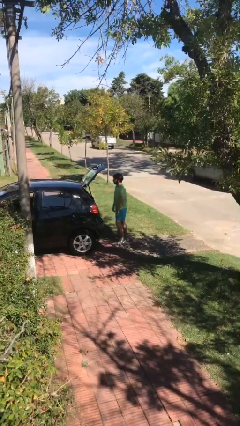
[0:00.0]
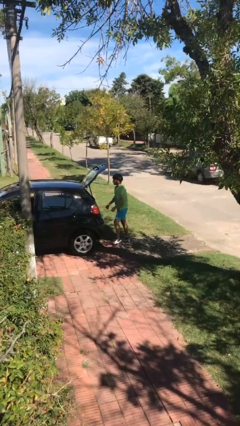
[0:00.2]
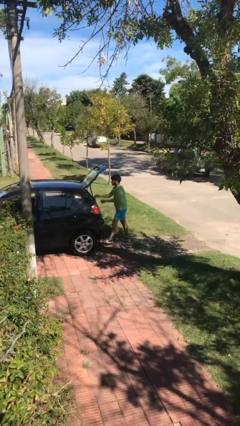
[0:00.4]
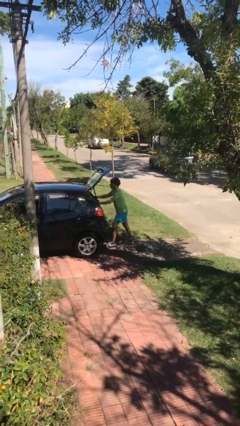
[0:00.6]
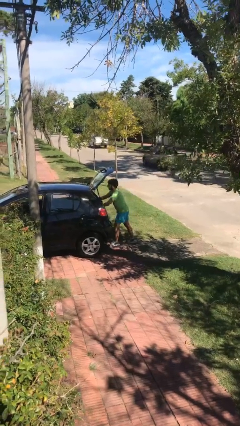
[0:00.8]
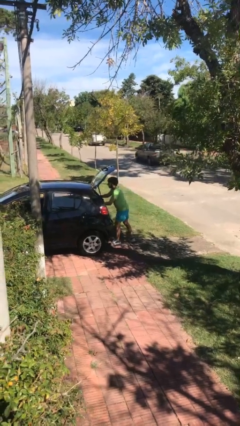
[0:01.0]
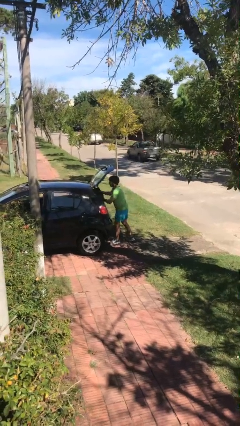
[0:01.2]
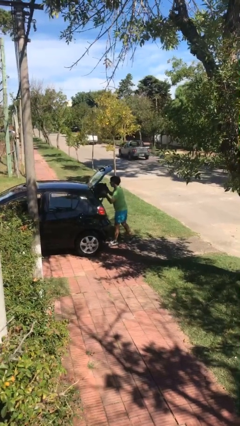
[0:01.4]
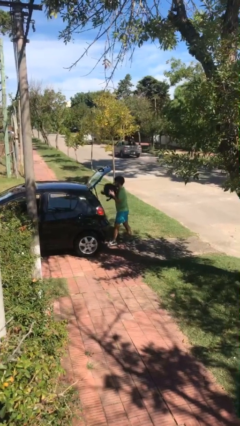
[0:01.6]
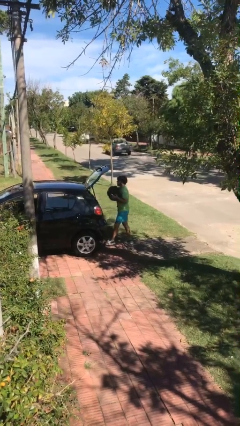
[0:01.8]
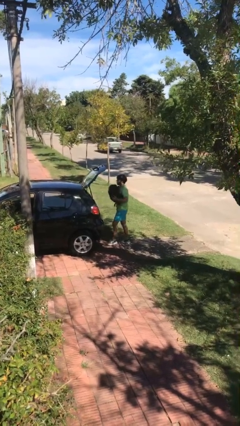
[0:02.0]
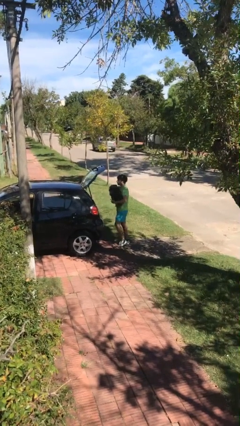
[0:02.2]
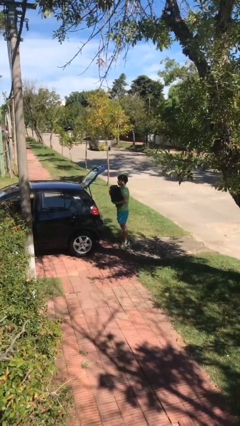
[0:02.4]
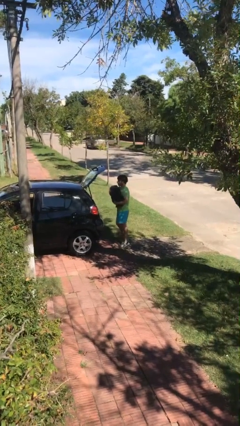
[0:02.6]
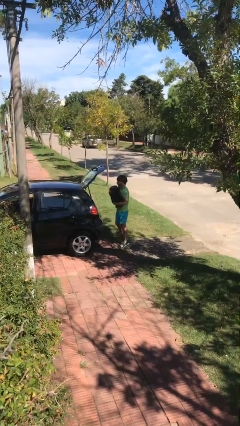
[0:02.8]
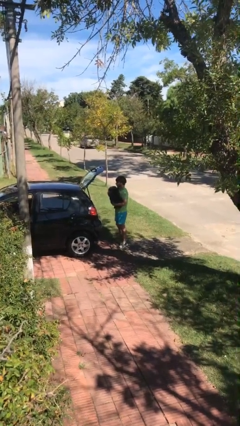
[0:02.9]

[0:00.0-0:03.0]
person unloads car

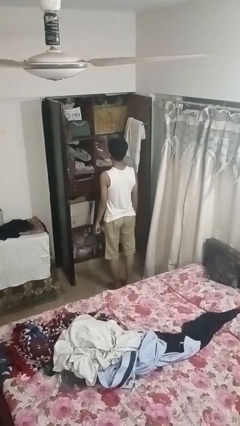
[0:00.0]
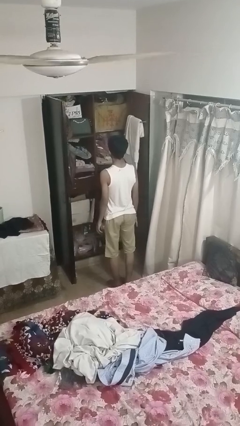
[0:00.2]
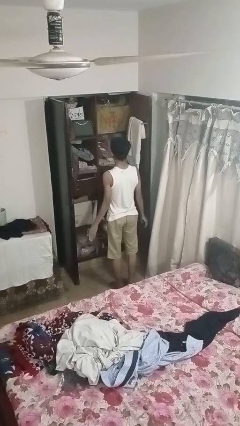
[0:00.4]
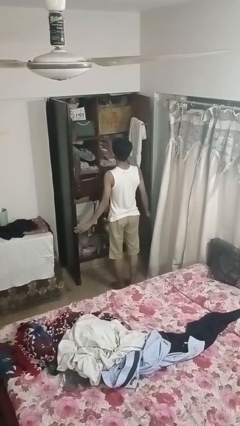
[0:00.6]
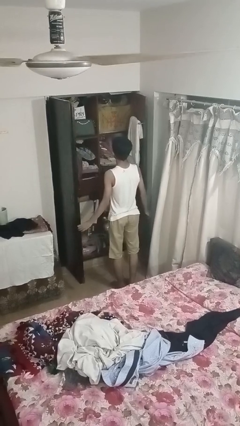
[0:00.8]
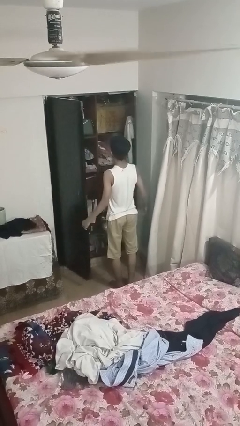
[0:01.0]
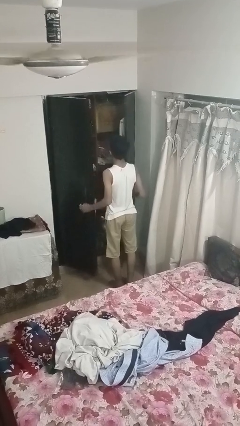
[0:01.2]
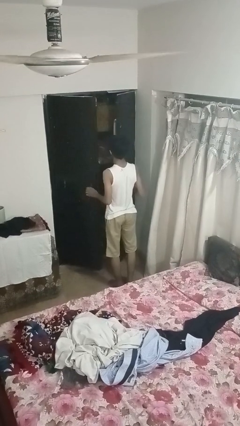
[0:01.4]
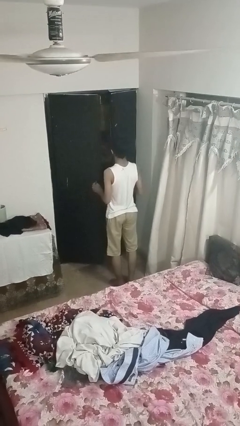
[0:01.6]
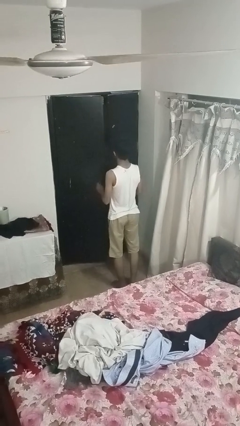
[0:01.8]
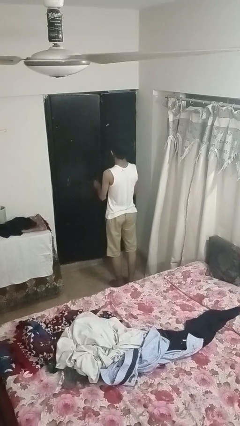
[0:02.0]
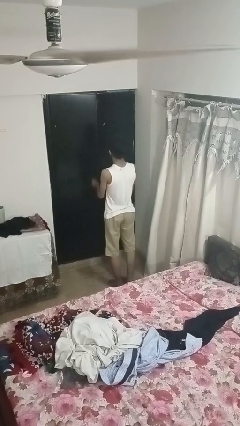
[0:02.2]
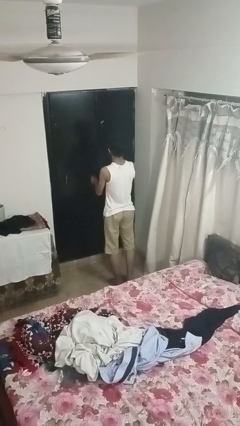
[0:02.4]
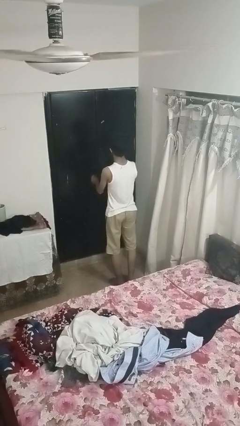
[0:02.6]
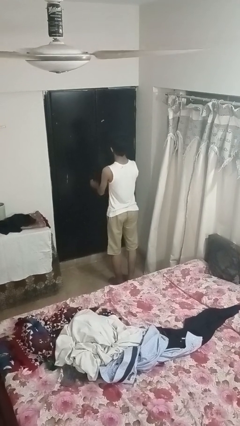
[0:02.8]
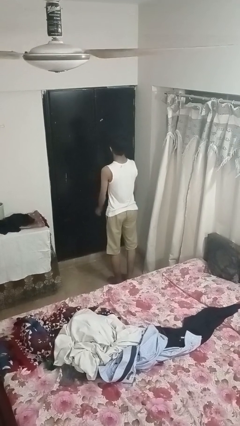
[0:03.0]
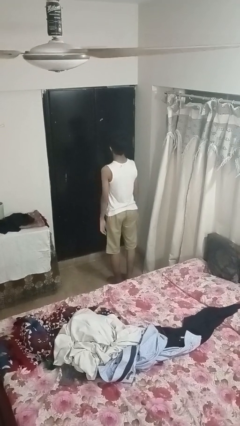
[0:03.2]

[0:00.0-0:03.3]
person closes closet door

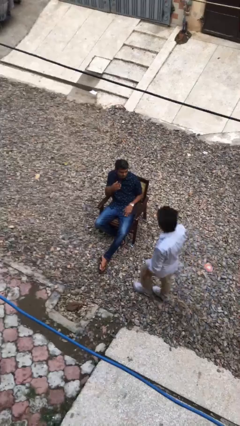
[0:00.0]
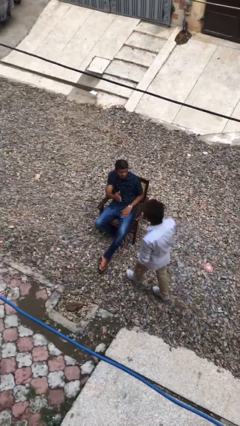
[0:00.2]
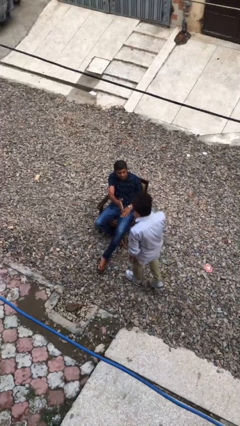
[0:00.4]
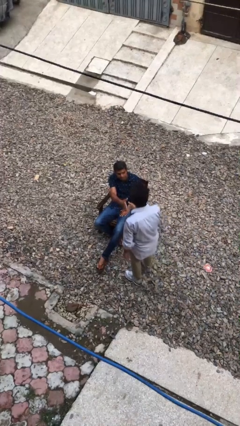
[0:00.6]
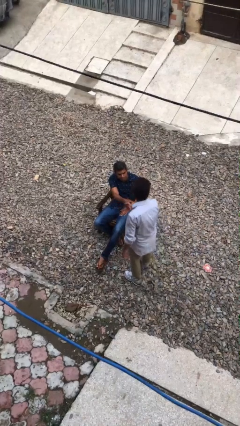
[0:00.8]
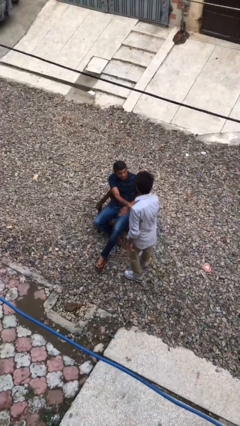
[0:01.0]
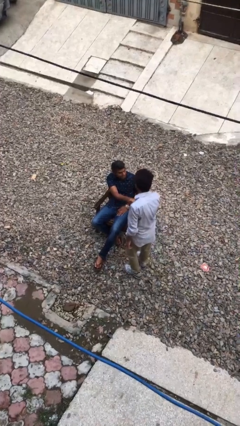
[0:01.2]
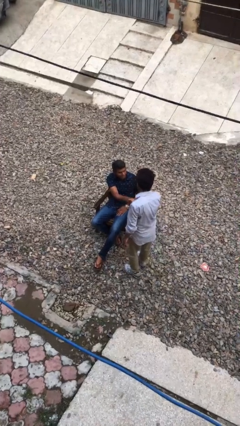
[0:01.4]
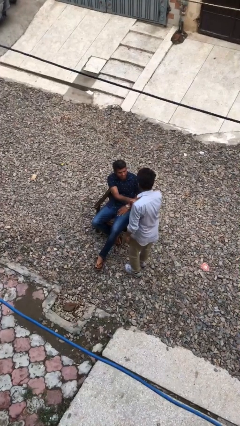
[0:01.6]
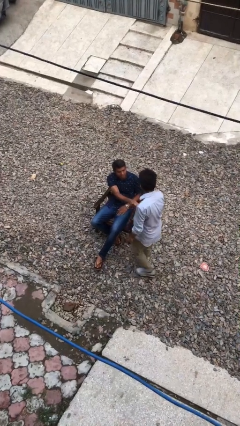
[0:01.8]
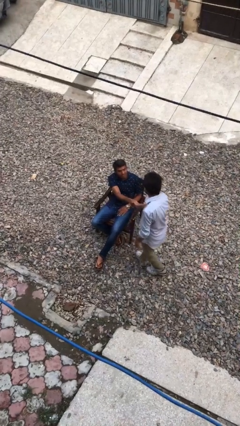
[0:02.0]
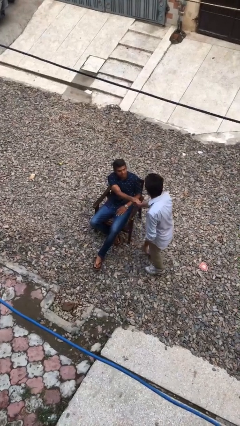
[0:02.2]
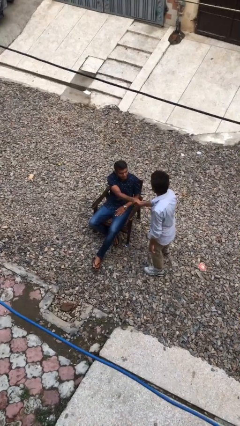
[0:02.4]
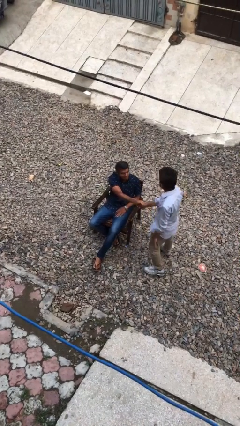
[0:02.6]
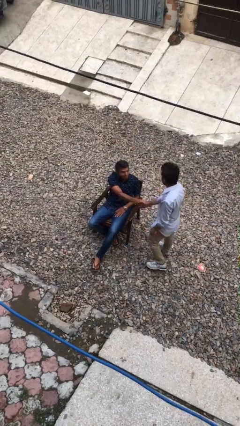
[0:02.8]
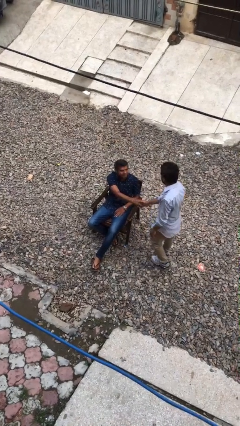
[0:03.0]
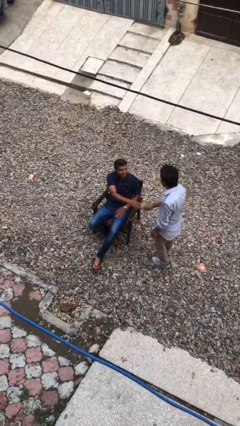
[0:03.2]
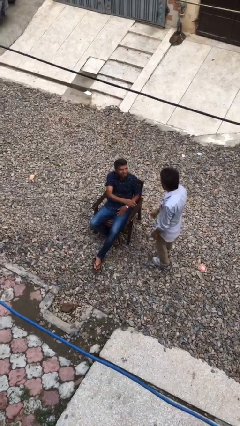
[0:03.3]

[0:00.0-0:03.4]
person shakes hand

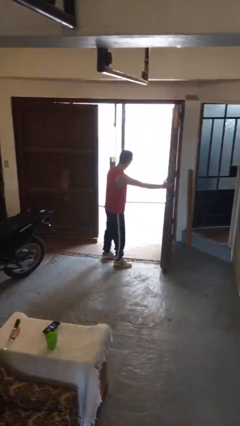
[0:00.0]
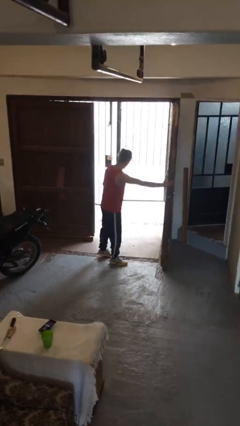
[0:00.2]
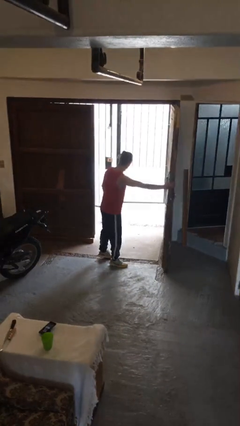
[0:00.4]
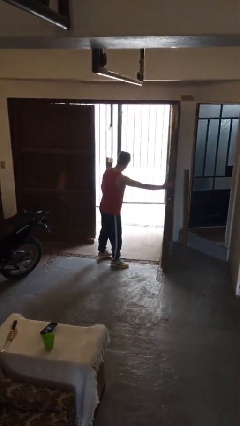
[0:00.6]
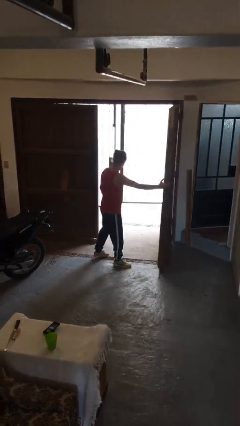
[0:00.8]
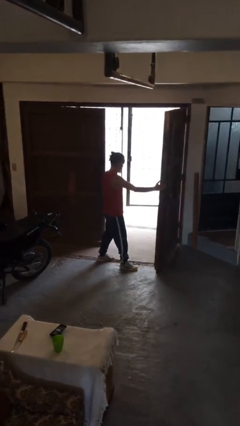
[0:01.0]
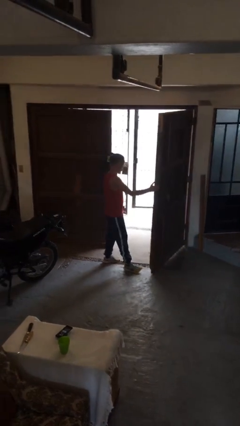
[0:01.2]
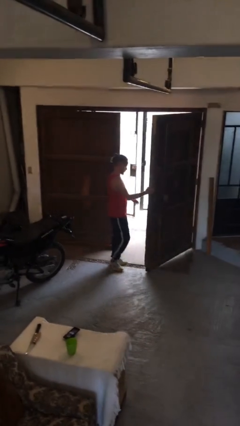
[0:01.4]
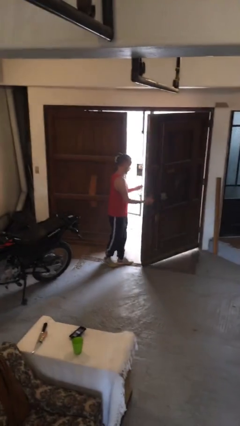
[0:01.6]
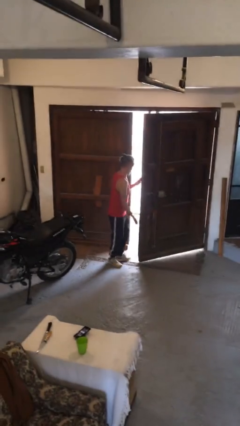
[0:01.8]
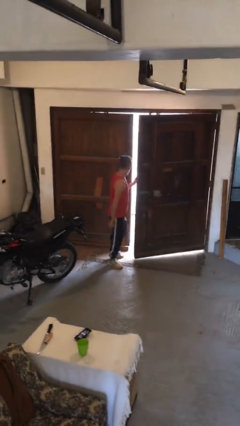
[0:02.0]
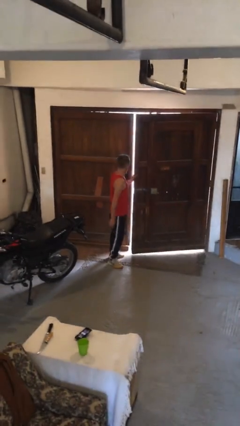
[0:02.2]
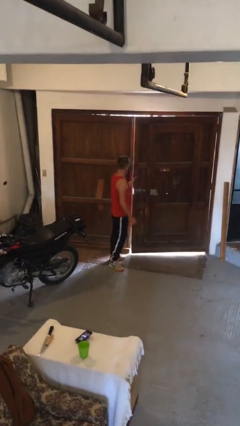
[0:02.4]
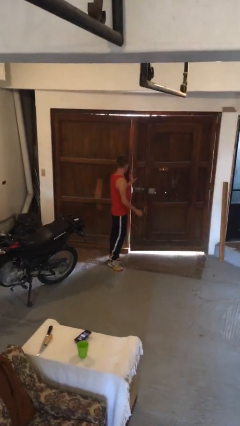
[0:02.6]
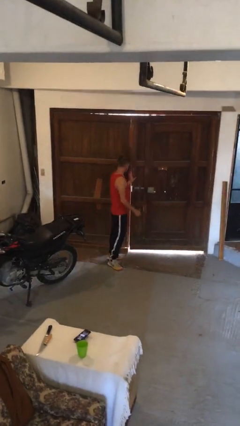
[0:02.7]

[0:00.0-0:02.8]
person closes gate

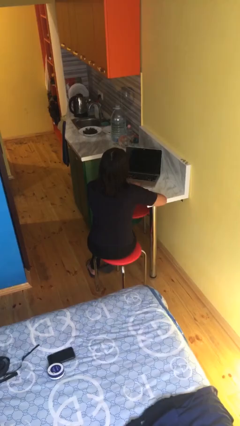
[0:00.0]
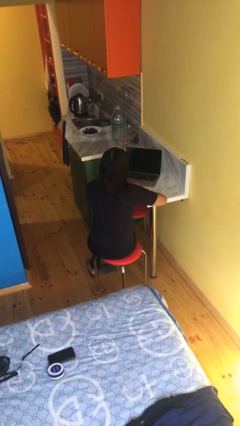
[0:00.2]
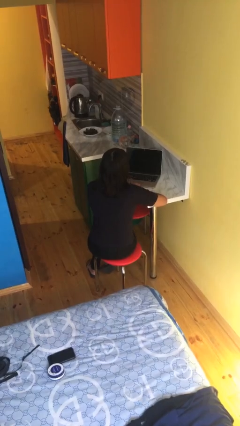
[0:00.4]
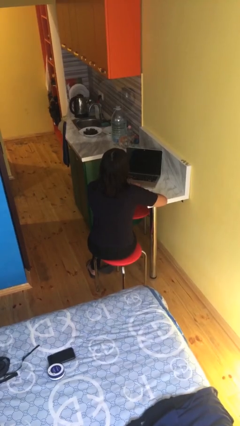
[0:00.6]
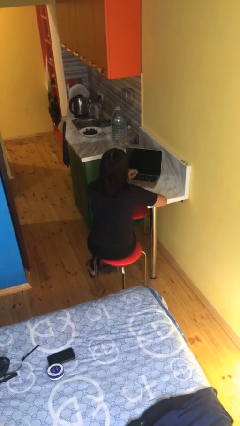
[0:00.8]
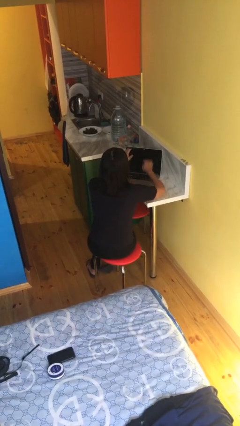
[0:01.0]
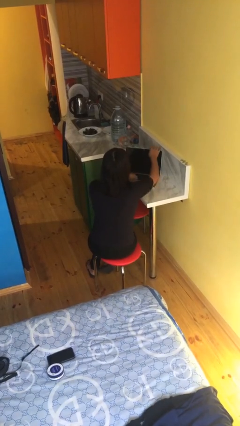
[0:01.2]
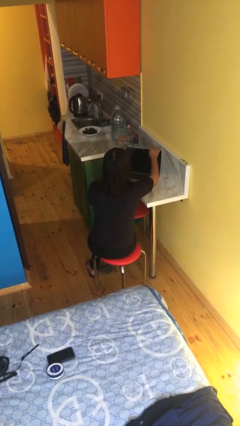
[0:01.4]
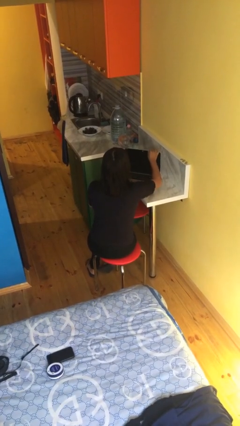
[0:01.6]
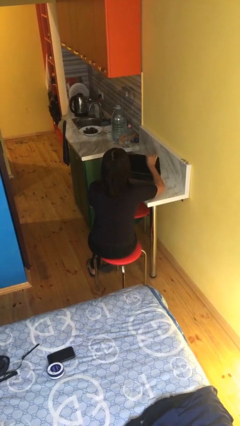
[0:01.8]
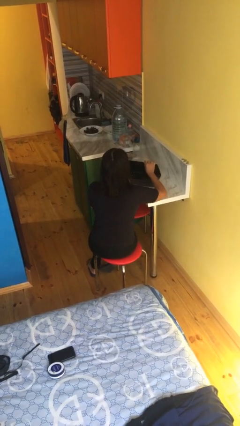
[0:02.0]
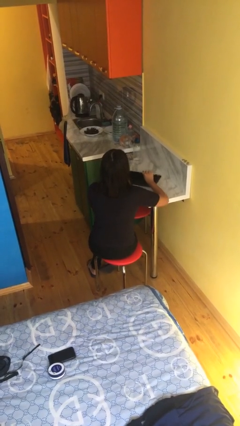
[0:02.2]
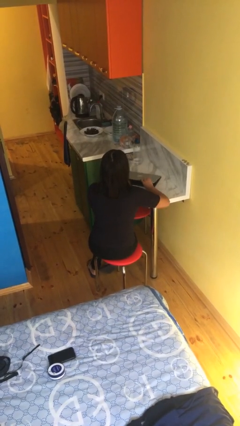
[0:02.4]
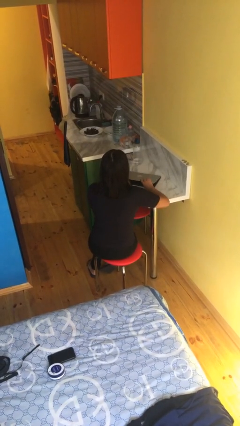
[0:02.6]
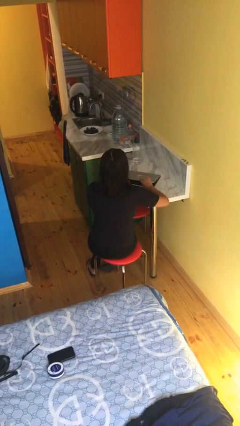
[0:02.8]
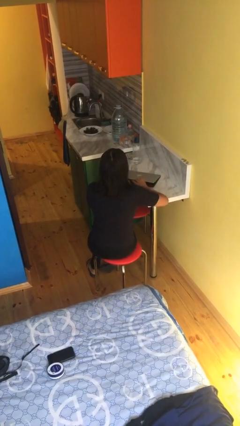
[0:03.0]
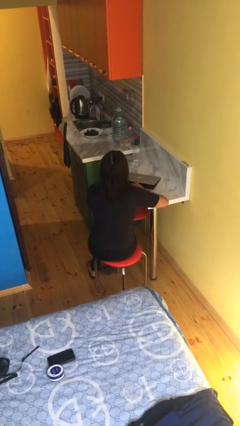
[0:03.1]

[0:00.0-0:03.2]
person closes laptop

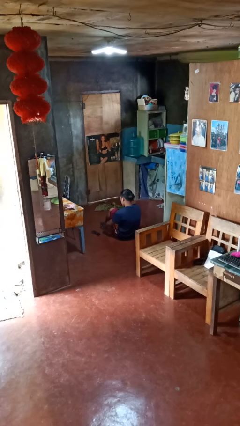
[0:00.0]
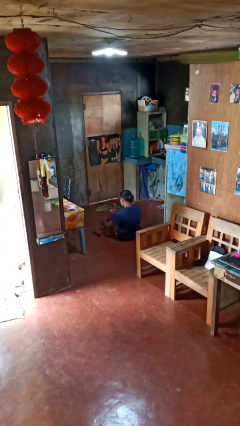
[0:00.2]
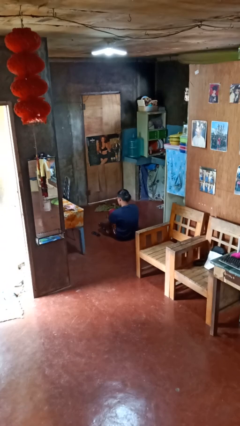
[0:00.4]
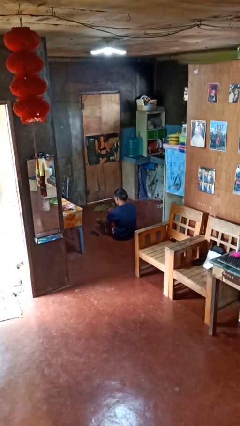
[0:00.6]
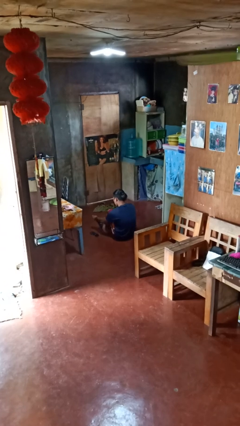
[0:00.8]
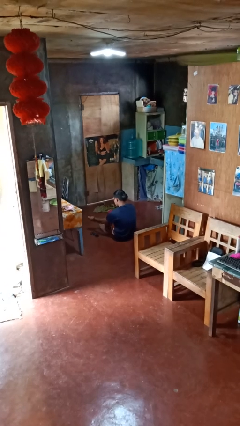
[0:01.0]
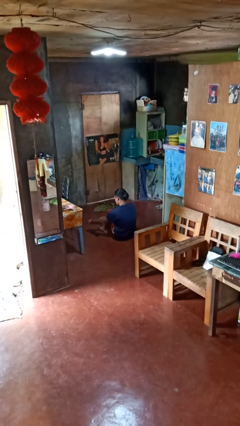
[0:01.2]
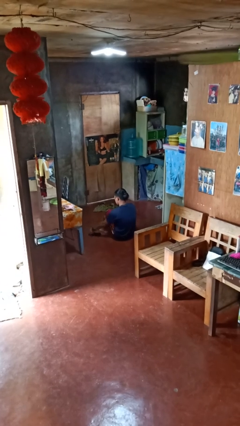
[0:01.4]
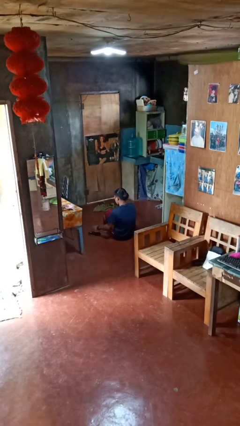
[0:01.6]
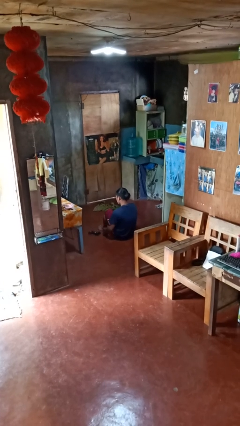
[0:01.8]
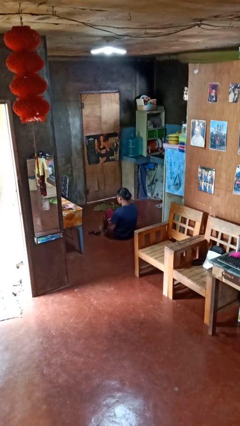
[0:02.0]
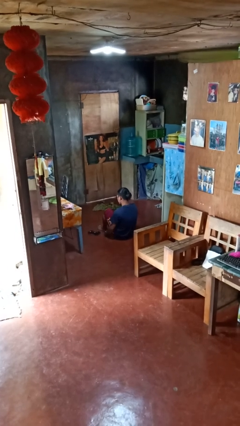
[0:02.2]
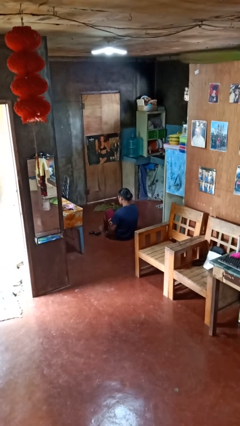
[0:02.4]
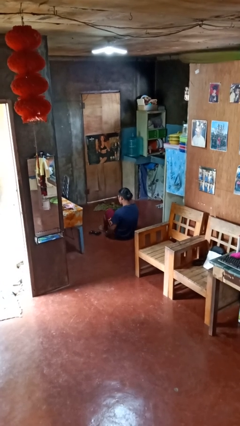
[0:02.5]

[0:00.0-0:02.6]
person takes off socks
